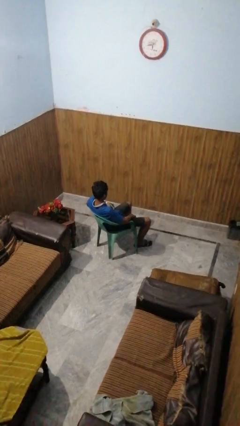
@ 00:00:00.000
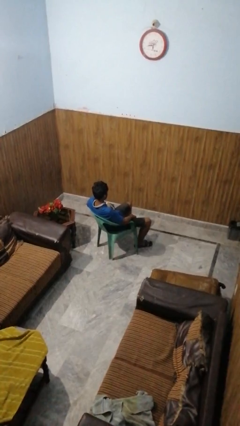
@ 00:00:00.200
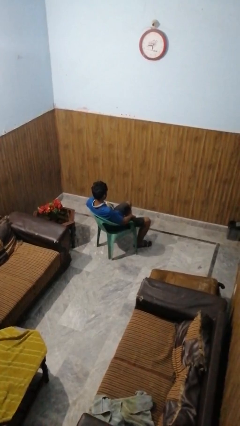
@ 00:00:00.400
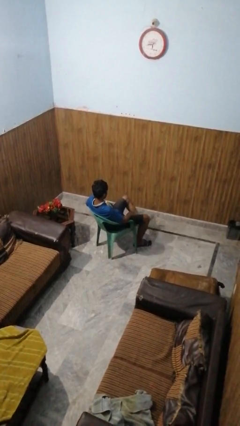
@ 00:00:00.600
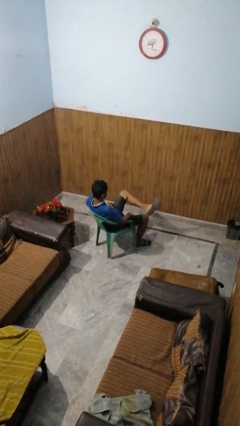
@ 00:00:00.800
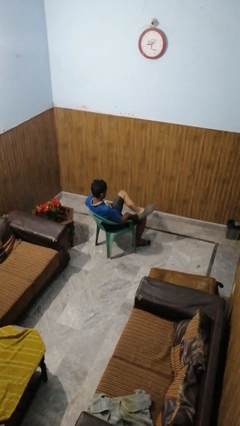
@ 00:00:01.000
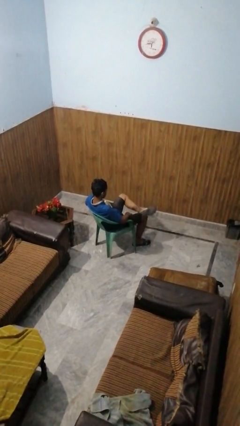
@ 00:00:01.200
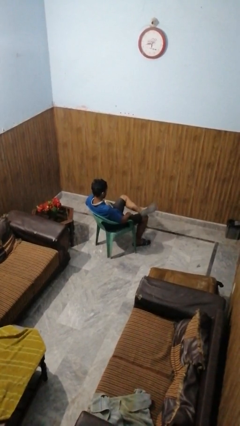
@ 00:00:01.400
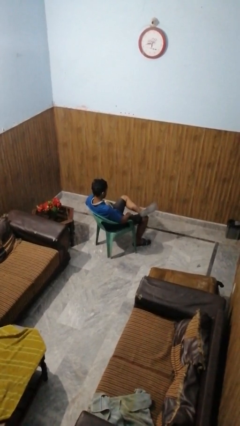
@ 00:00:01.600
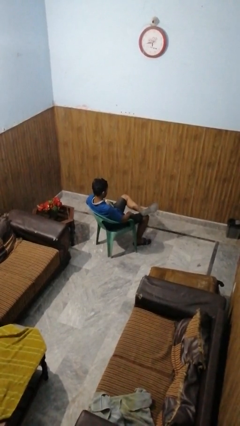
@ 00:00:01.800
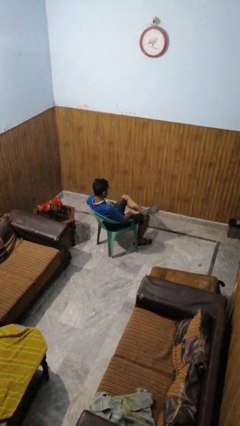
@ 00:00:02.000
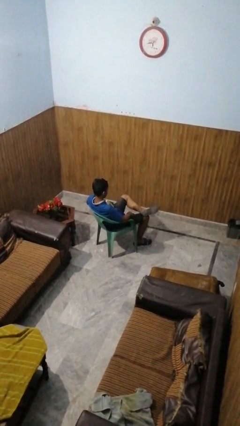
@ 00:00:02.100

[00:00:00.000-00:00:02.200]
person crosses legs

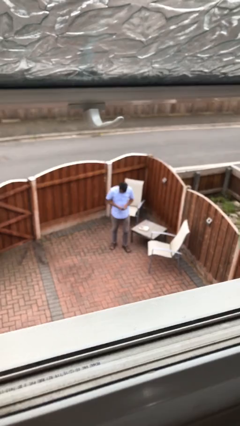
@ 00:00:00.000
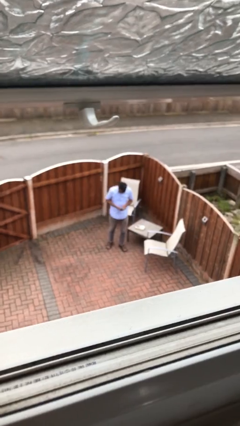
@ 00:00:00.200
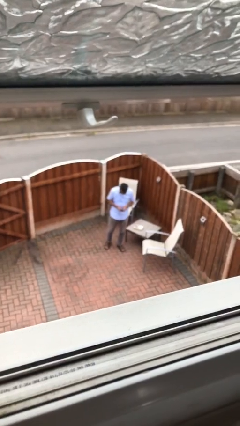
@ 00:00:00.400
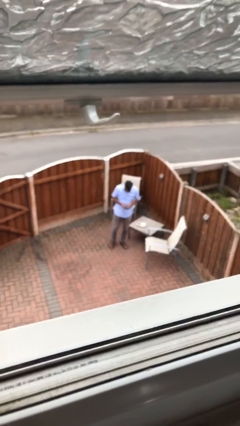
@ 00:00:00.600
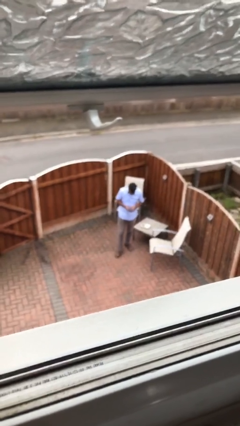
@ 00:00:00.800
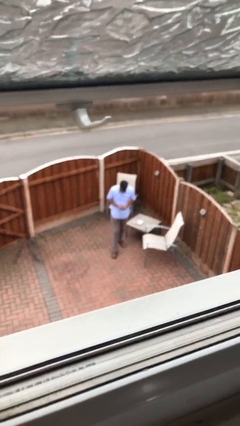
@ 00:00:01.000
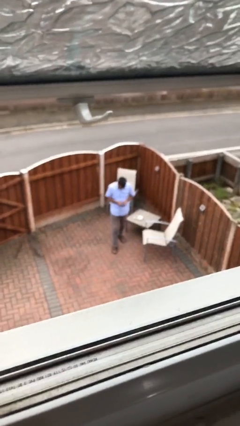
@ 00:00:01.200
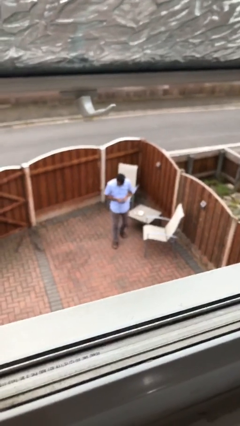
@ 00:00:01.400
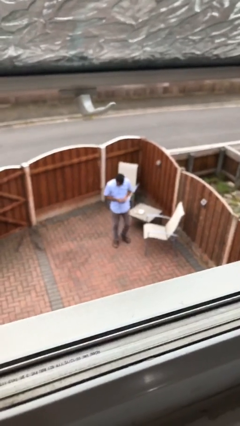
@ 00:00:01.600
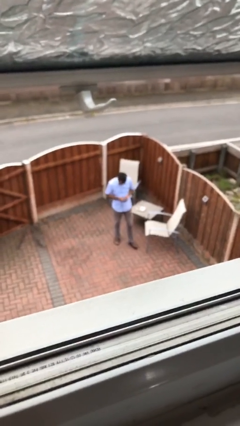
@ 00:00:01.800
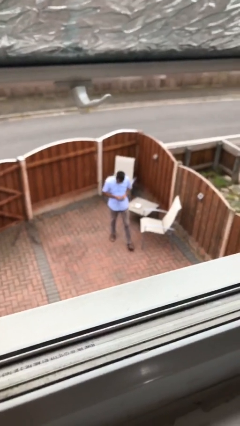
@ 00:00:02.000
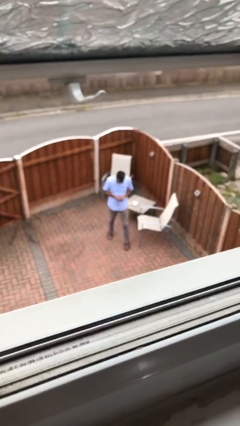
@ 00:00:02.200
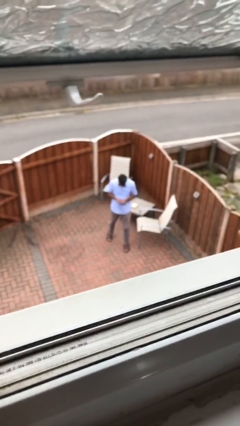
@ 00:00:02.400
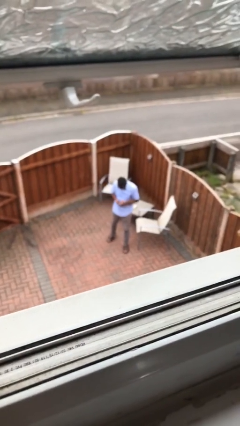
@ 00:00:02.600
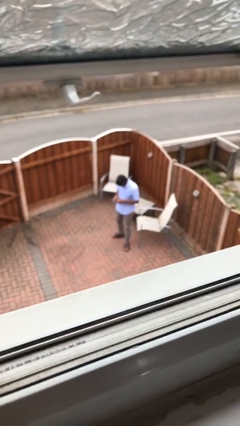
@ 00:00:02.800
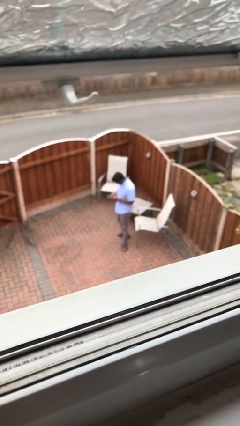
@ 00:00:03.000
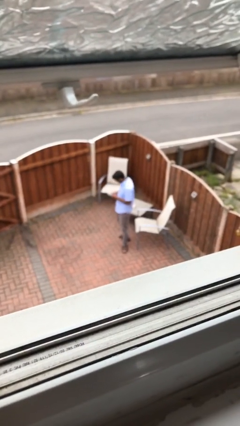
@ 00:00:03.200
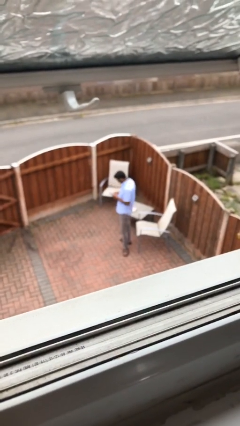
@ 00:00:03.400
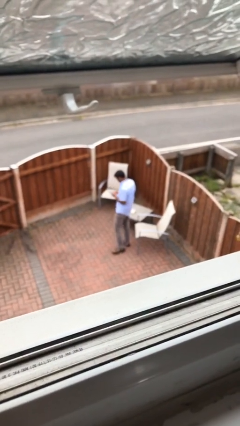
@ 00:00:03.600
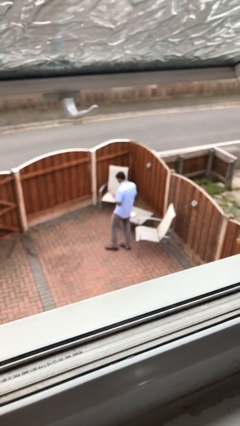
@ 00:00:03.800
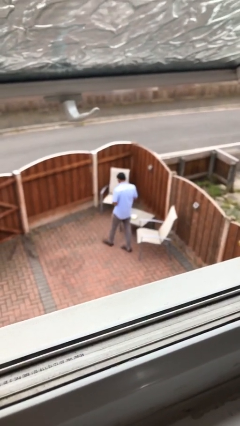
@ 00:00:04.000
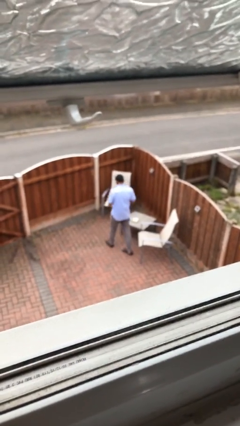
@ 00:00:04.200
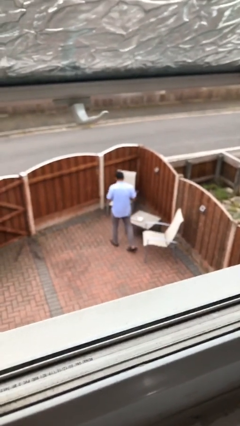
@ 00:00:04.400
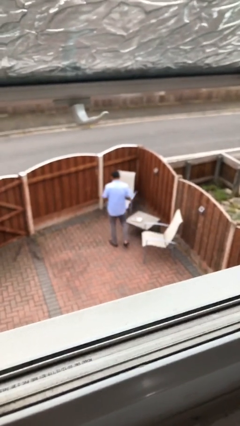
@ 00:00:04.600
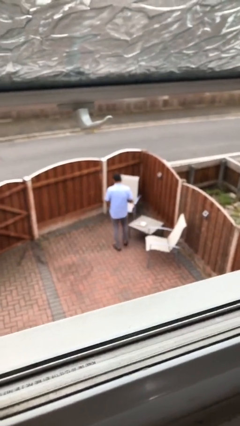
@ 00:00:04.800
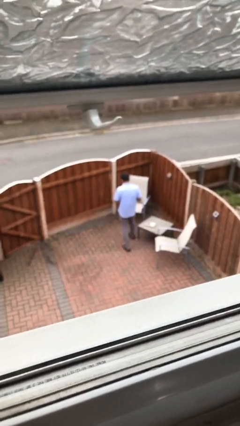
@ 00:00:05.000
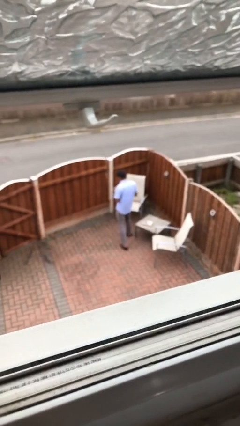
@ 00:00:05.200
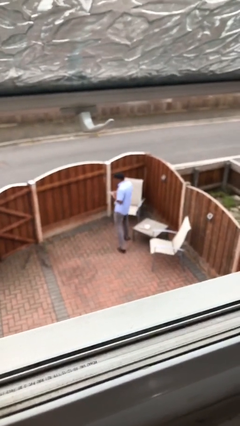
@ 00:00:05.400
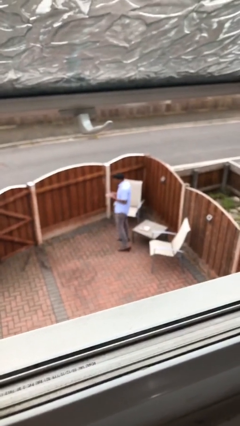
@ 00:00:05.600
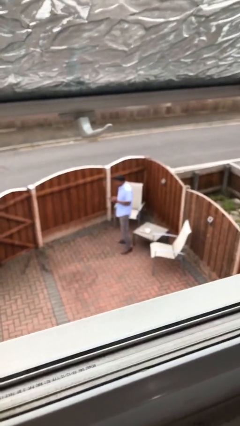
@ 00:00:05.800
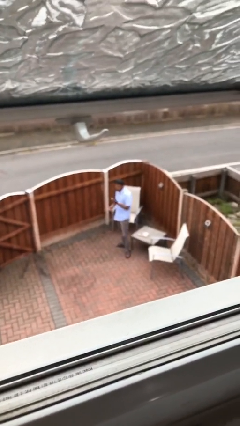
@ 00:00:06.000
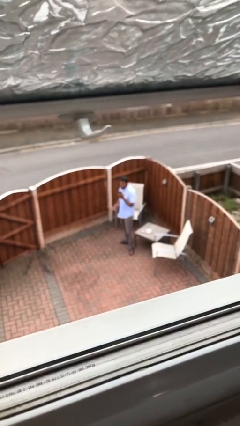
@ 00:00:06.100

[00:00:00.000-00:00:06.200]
person texts on phone

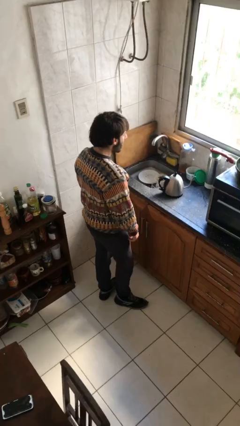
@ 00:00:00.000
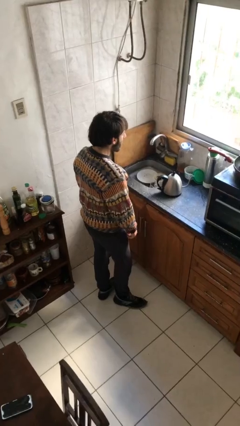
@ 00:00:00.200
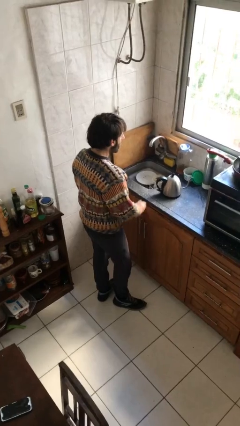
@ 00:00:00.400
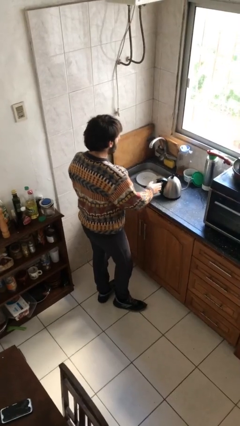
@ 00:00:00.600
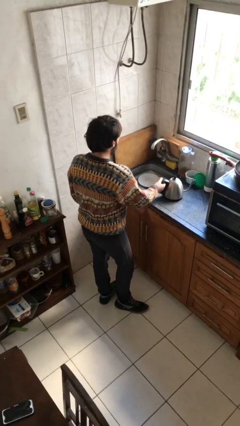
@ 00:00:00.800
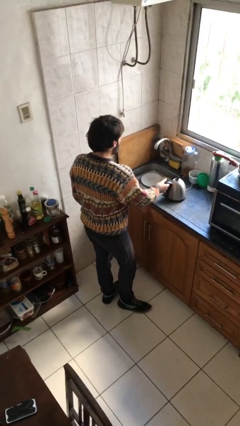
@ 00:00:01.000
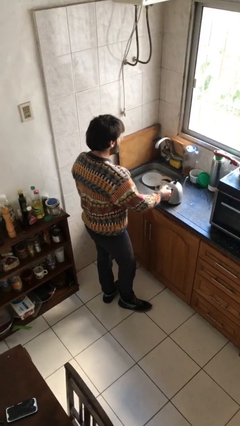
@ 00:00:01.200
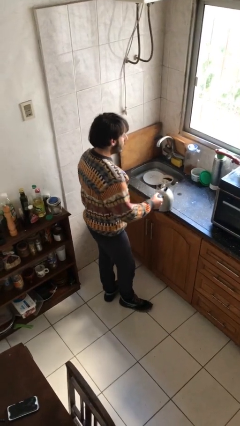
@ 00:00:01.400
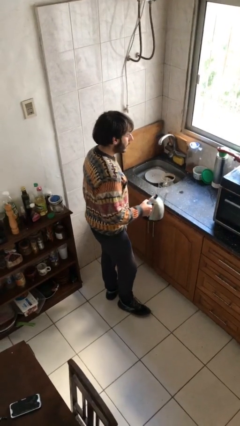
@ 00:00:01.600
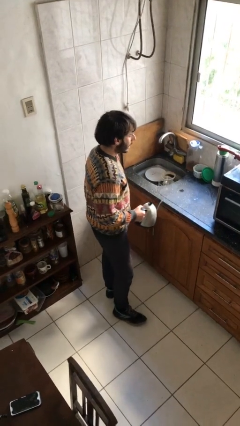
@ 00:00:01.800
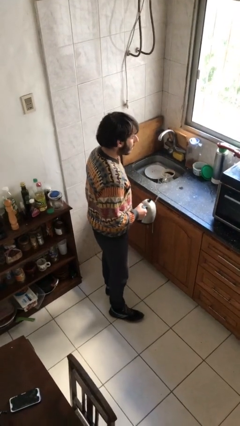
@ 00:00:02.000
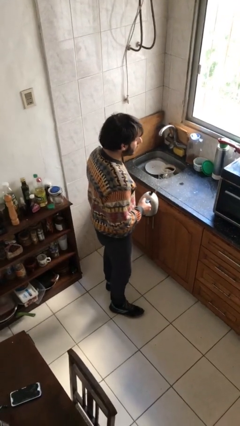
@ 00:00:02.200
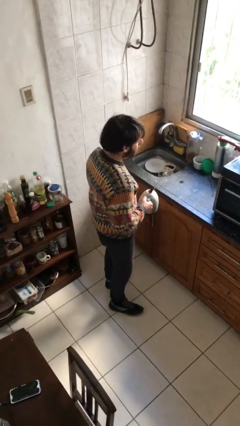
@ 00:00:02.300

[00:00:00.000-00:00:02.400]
person picks up object from countertop

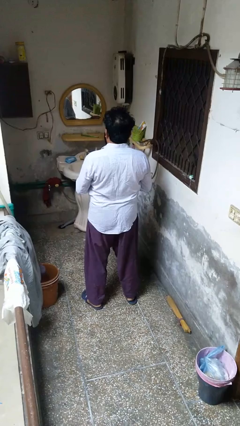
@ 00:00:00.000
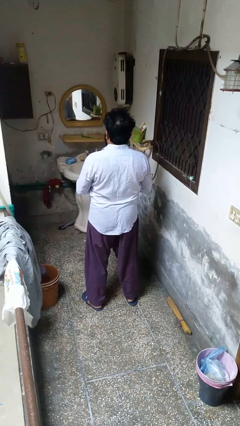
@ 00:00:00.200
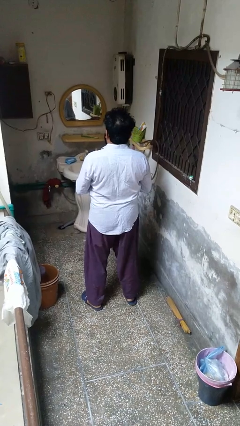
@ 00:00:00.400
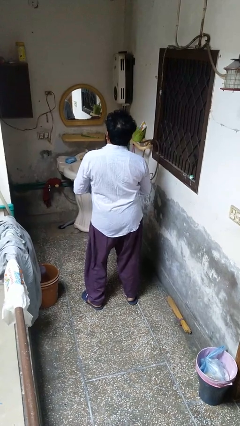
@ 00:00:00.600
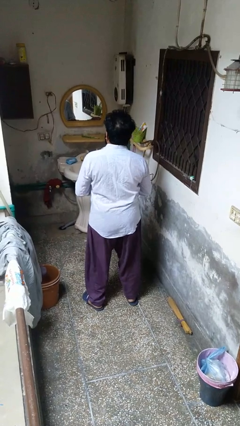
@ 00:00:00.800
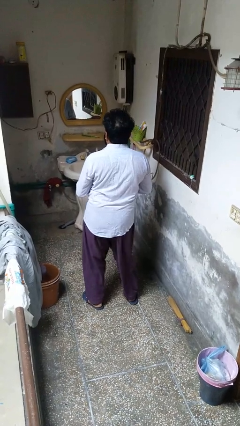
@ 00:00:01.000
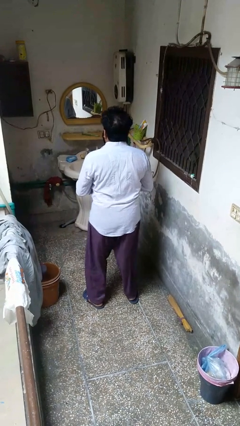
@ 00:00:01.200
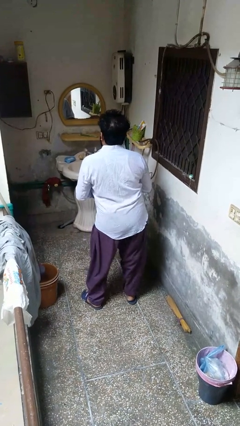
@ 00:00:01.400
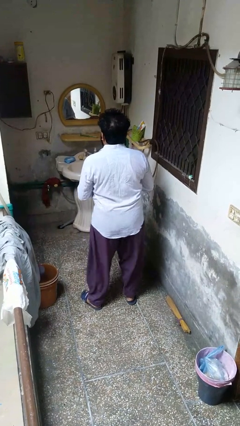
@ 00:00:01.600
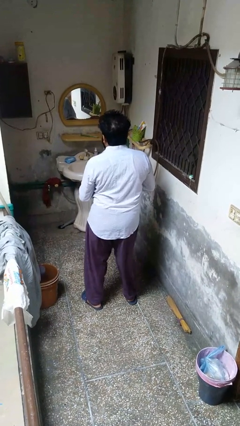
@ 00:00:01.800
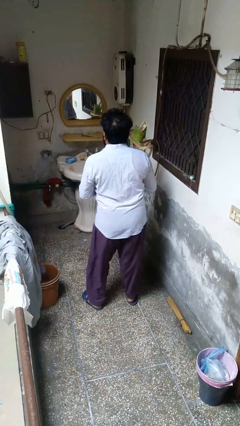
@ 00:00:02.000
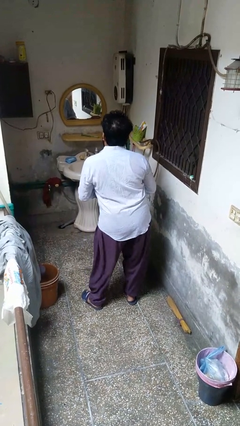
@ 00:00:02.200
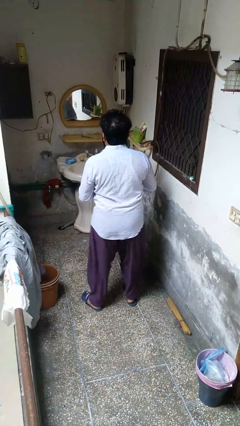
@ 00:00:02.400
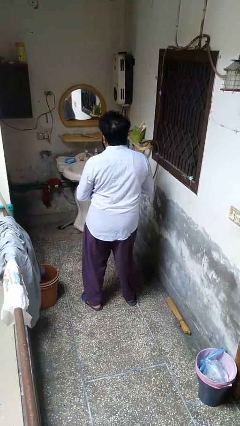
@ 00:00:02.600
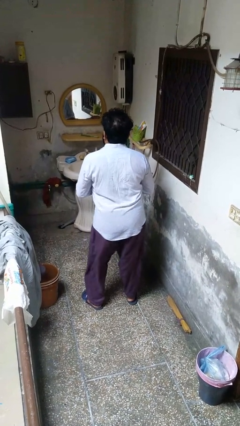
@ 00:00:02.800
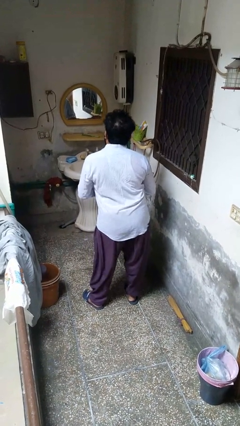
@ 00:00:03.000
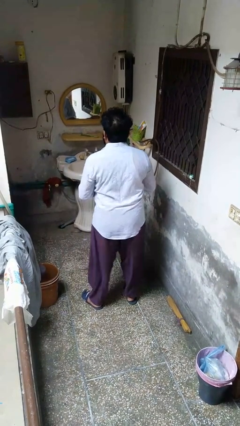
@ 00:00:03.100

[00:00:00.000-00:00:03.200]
person wiggles hips

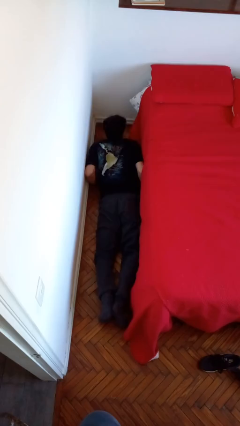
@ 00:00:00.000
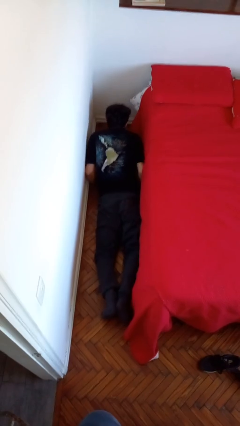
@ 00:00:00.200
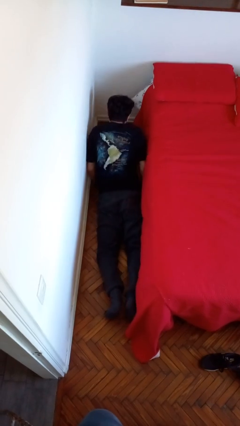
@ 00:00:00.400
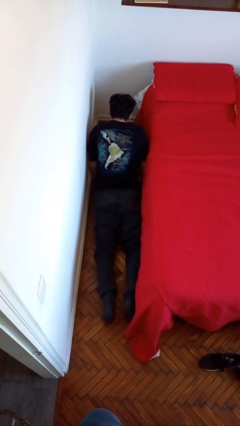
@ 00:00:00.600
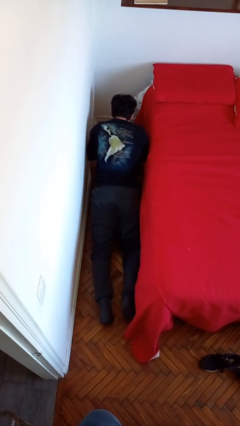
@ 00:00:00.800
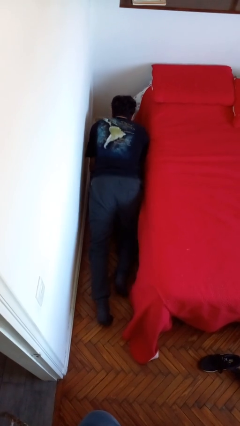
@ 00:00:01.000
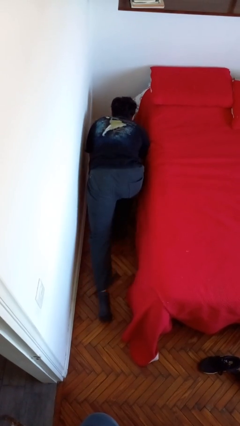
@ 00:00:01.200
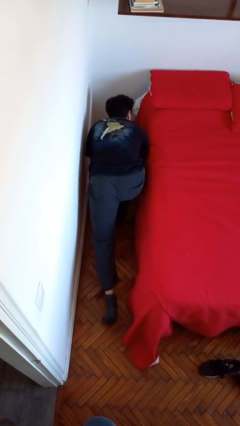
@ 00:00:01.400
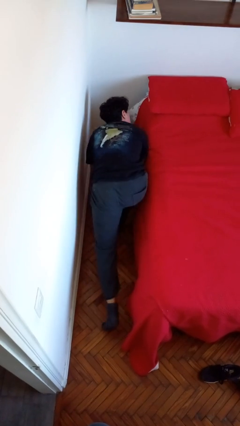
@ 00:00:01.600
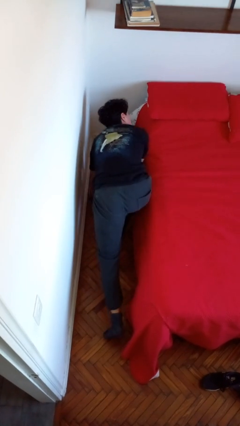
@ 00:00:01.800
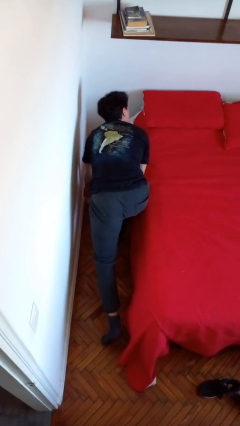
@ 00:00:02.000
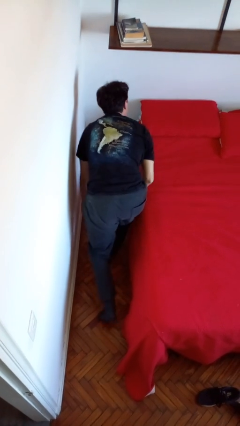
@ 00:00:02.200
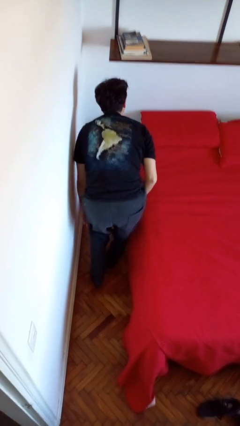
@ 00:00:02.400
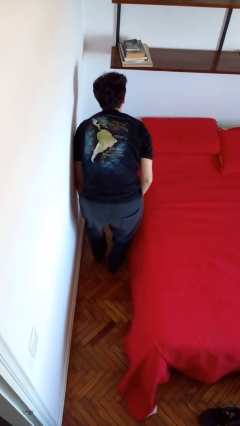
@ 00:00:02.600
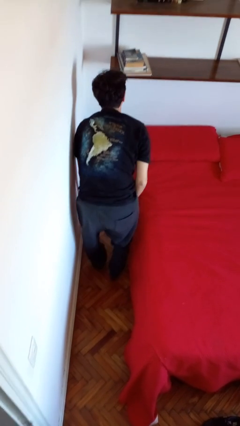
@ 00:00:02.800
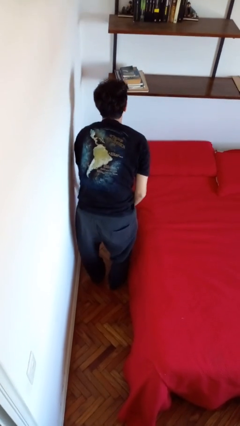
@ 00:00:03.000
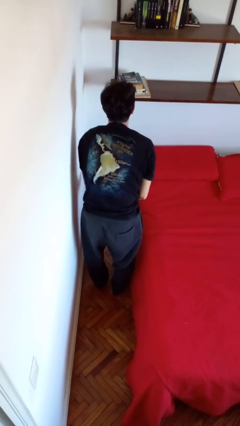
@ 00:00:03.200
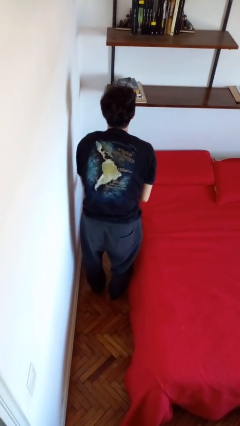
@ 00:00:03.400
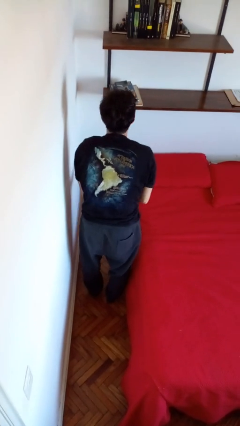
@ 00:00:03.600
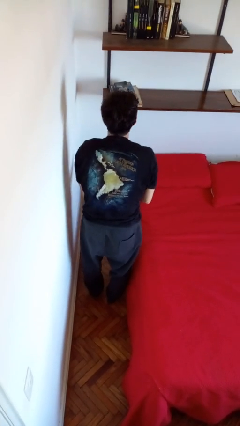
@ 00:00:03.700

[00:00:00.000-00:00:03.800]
person stands up from floor
